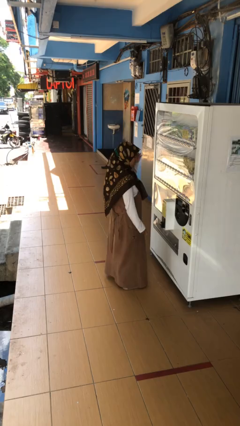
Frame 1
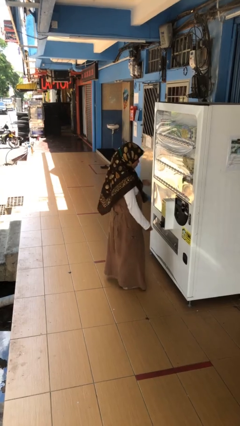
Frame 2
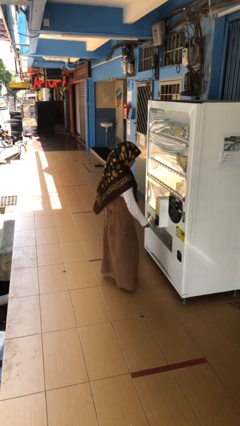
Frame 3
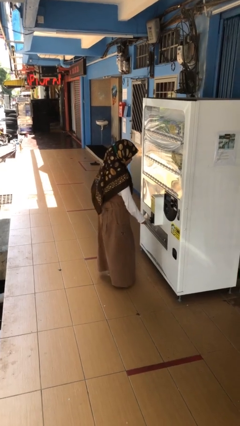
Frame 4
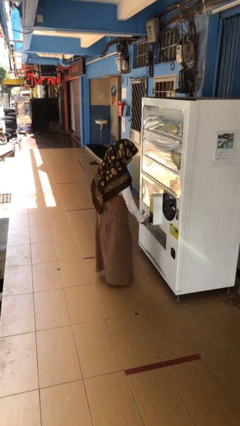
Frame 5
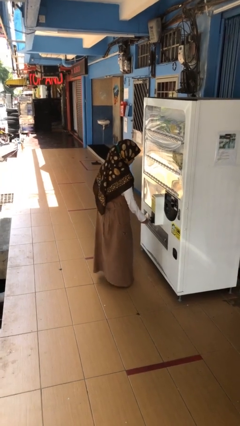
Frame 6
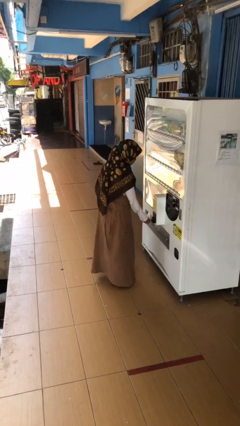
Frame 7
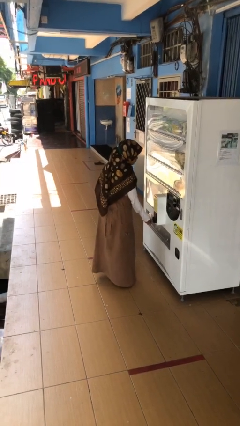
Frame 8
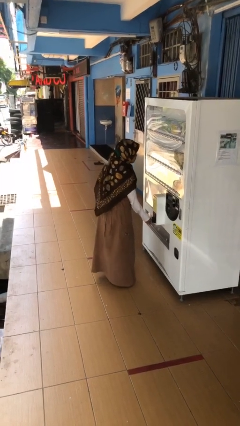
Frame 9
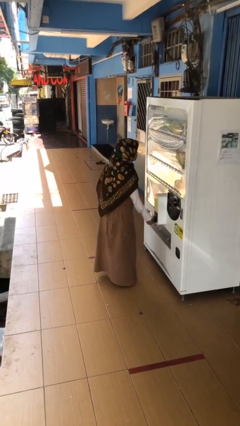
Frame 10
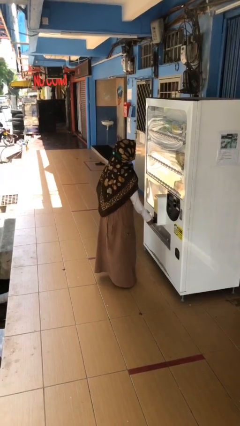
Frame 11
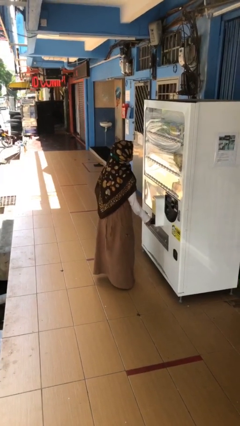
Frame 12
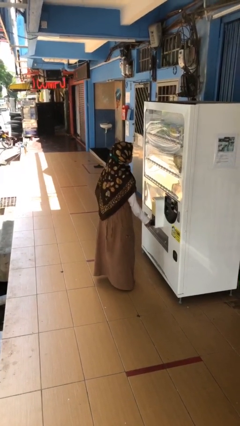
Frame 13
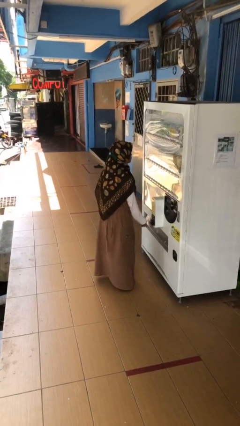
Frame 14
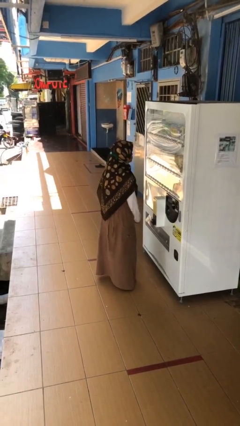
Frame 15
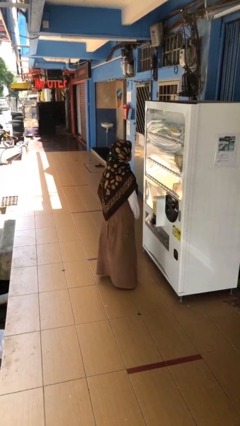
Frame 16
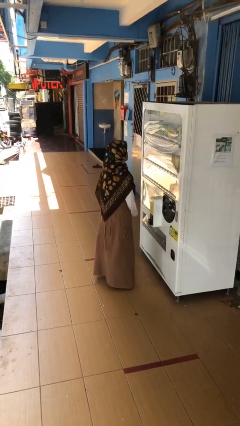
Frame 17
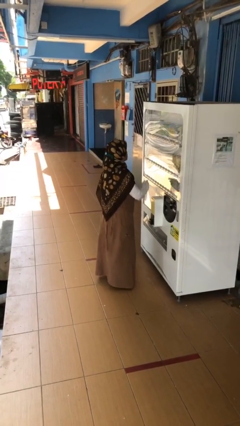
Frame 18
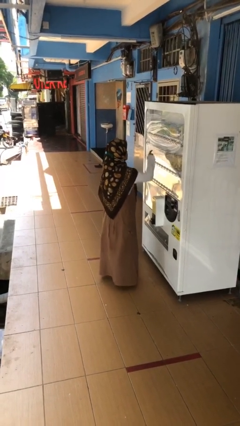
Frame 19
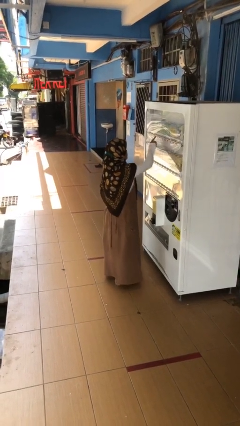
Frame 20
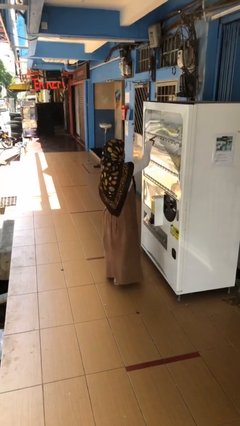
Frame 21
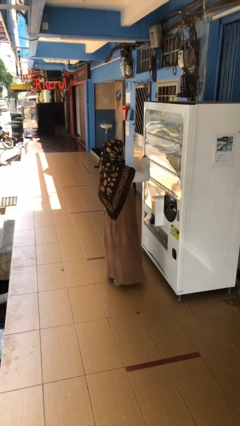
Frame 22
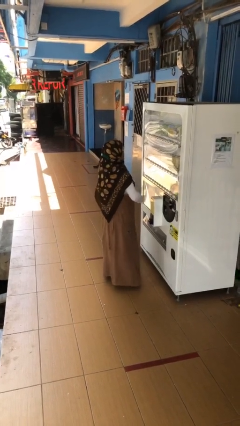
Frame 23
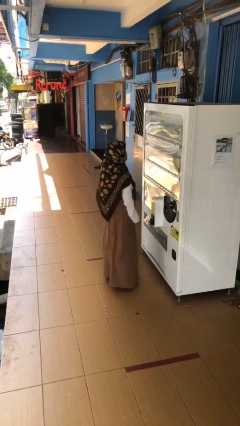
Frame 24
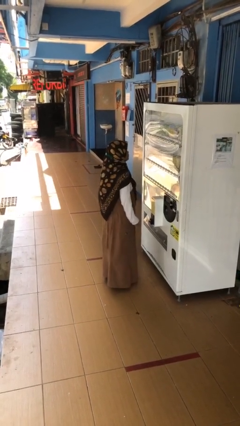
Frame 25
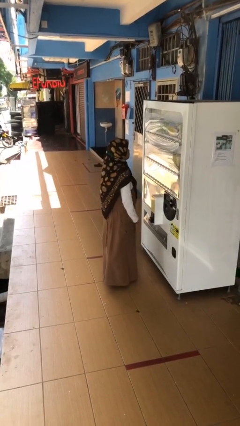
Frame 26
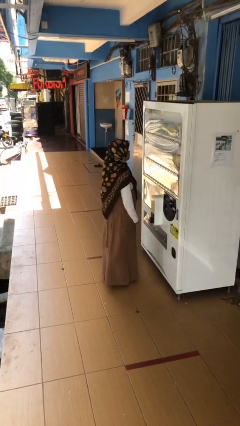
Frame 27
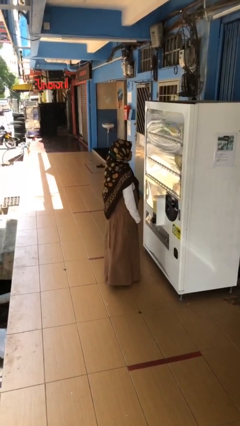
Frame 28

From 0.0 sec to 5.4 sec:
person purchases from machine

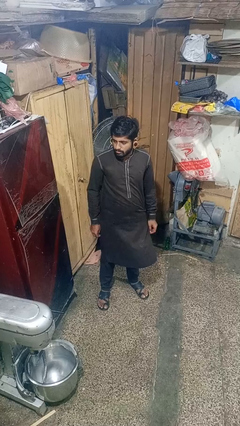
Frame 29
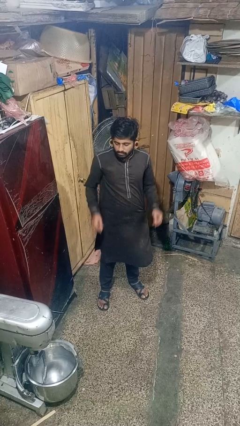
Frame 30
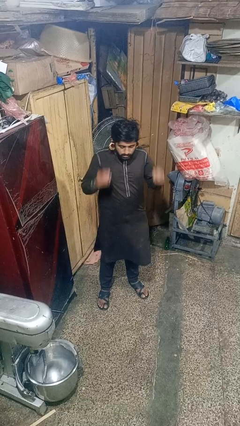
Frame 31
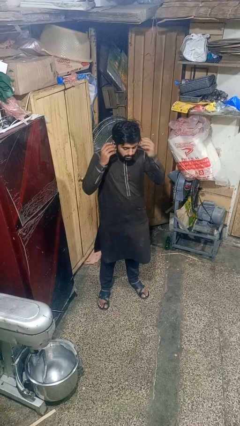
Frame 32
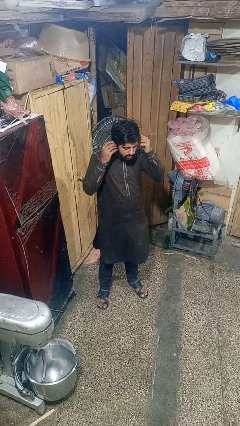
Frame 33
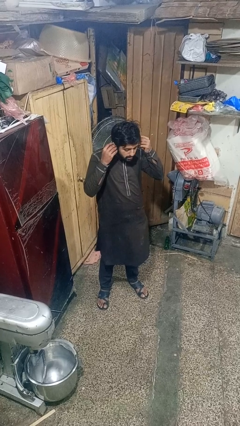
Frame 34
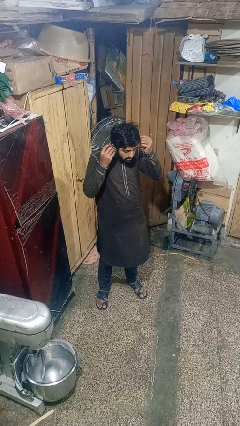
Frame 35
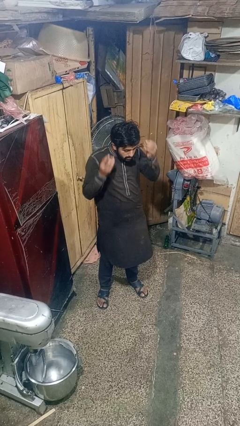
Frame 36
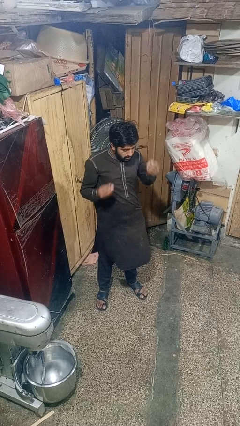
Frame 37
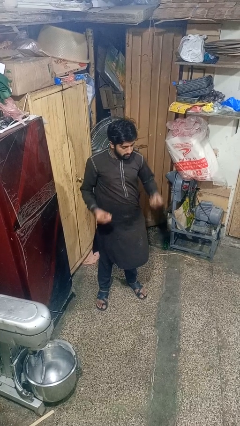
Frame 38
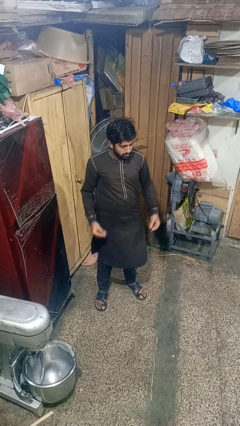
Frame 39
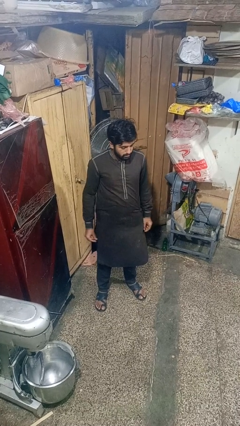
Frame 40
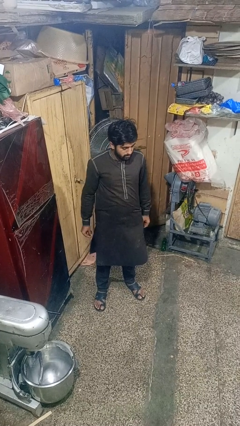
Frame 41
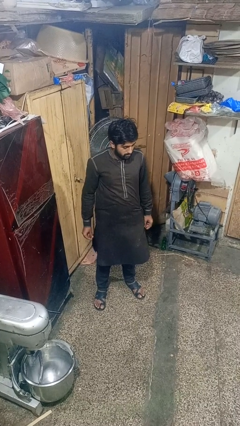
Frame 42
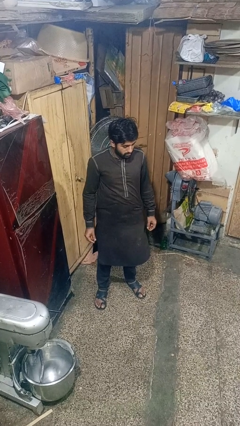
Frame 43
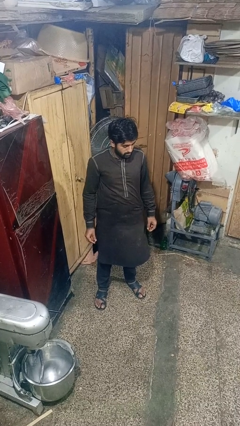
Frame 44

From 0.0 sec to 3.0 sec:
person takes off earrings

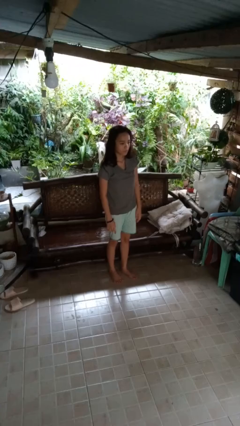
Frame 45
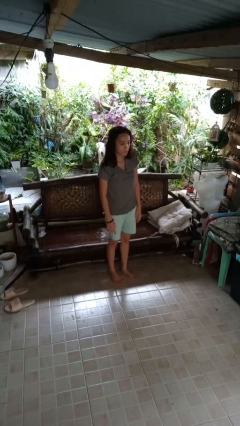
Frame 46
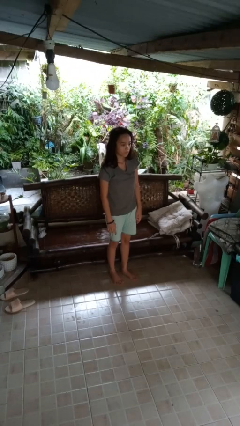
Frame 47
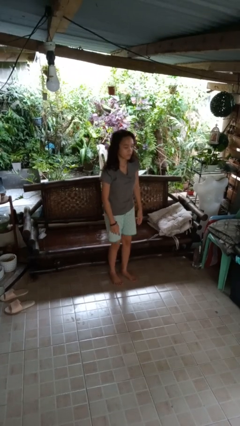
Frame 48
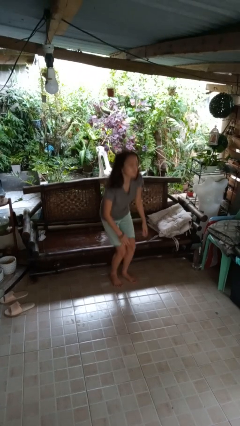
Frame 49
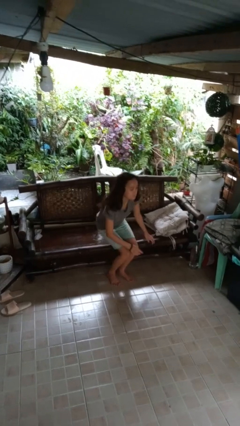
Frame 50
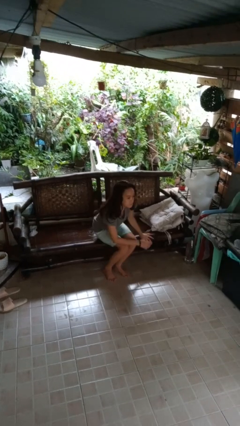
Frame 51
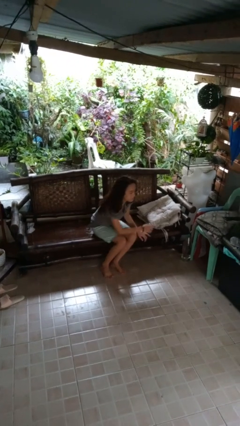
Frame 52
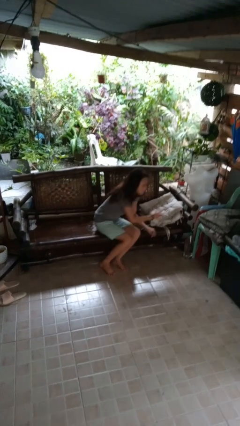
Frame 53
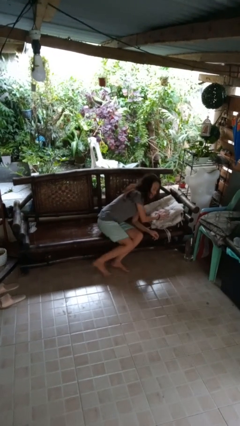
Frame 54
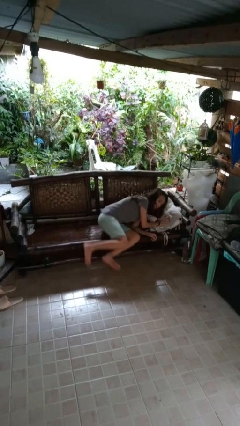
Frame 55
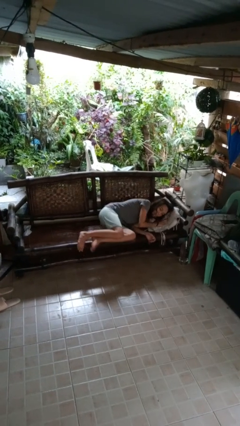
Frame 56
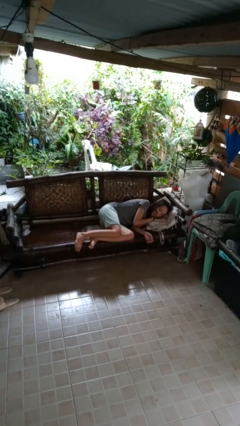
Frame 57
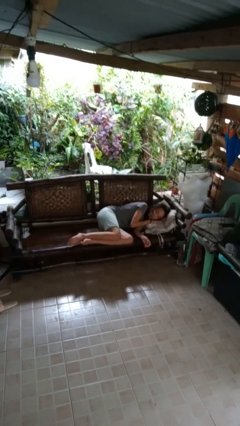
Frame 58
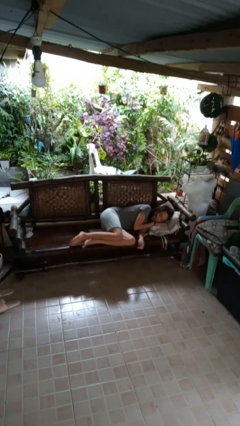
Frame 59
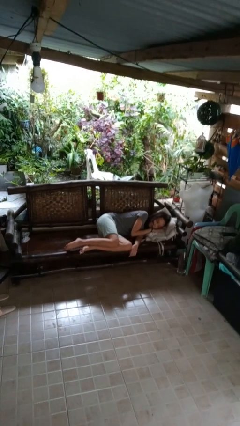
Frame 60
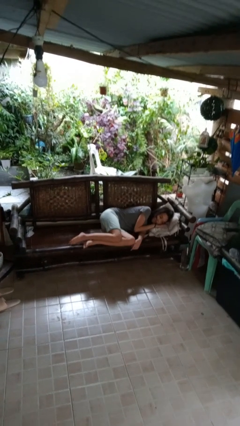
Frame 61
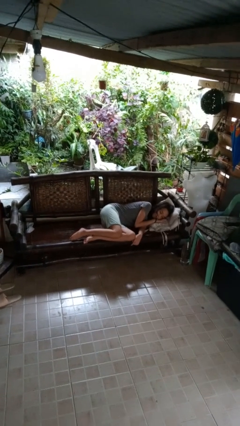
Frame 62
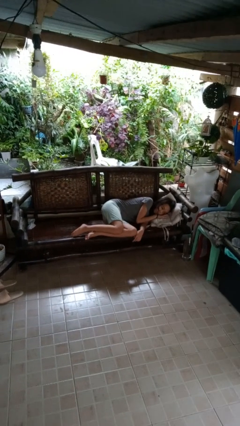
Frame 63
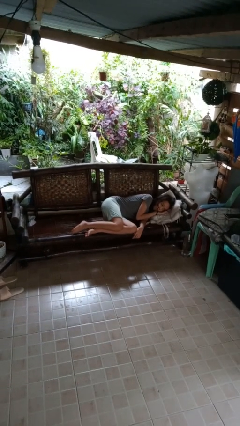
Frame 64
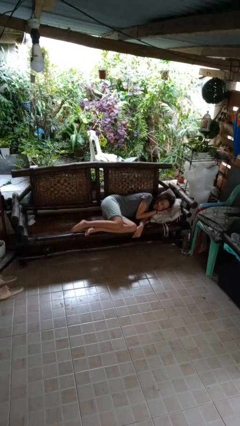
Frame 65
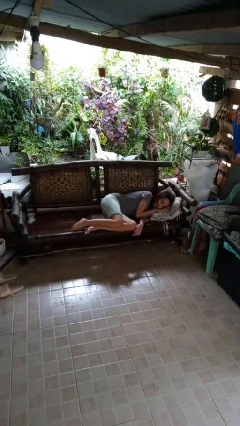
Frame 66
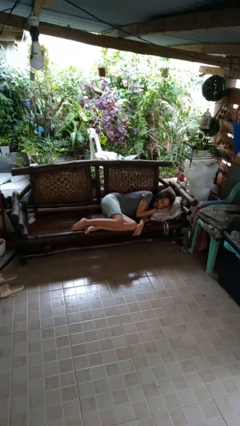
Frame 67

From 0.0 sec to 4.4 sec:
person lies down on couch

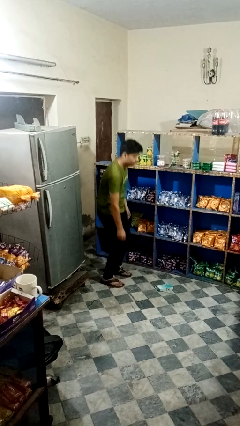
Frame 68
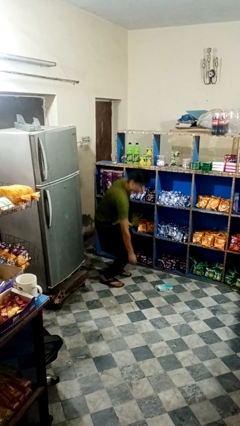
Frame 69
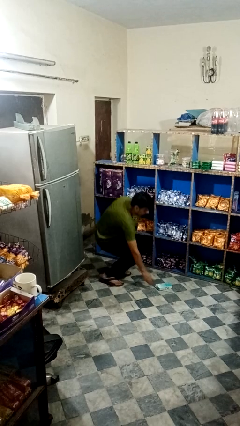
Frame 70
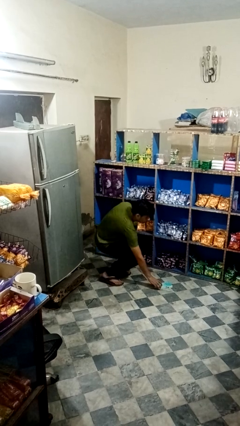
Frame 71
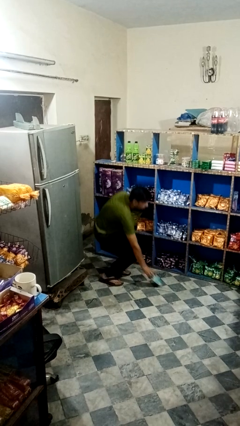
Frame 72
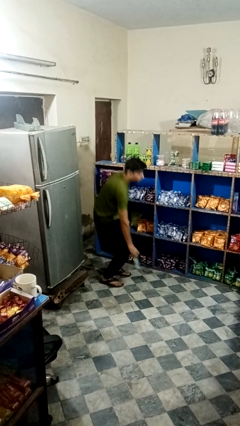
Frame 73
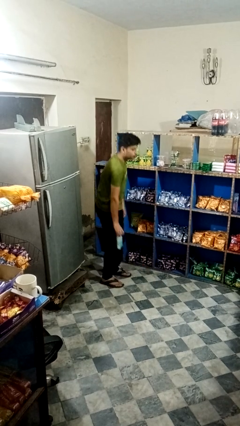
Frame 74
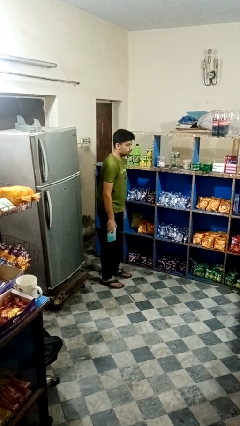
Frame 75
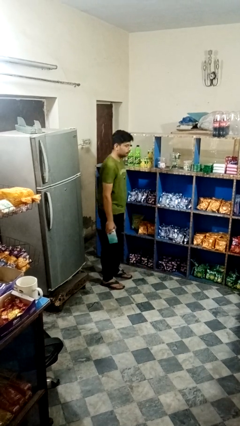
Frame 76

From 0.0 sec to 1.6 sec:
person picks up object from floor

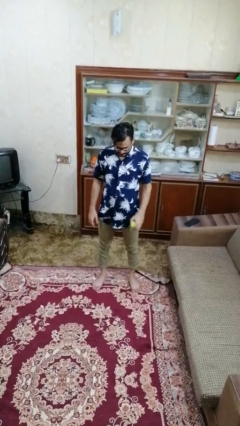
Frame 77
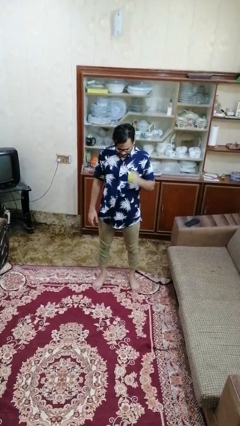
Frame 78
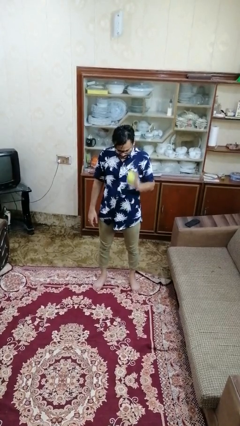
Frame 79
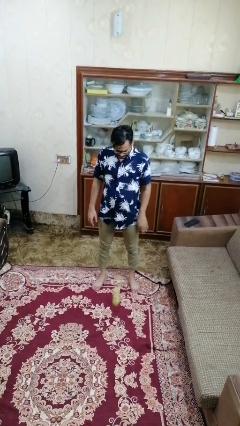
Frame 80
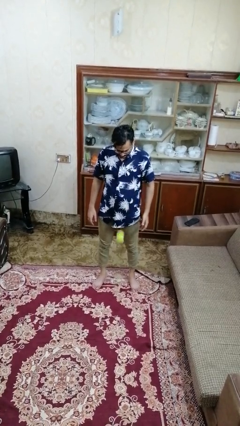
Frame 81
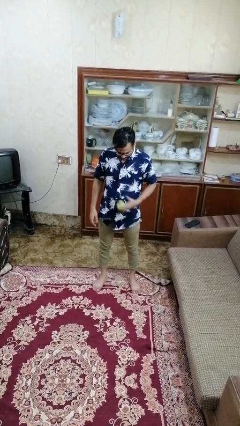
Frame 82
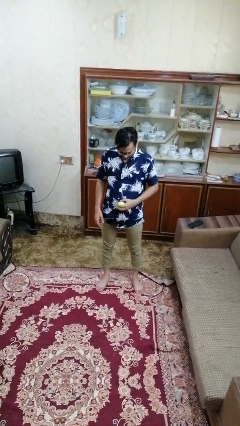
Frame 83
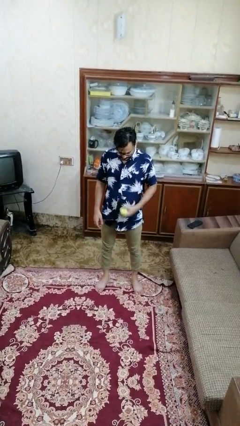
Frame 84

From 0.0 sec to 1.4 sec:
person bounces ball on floor

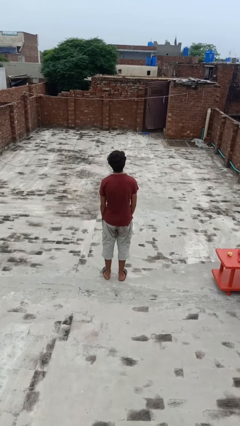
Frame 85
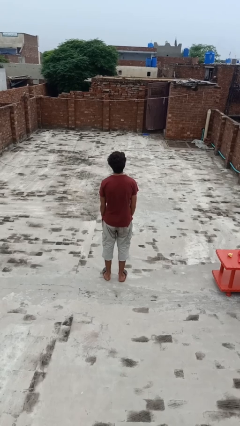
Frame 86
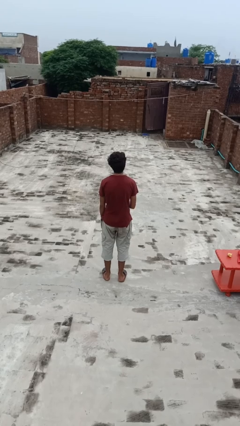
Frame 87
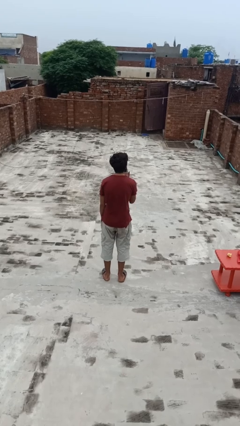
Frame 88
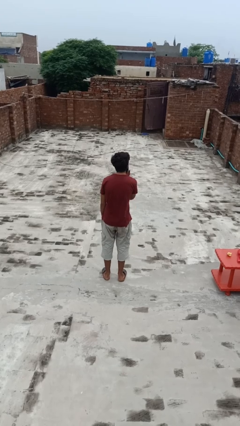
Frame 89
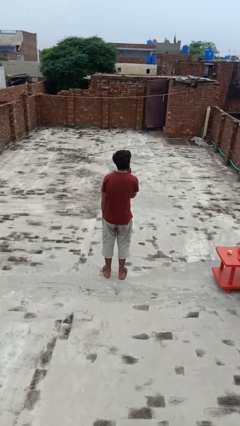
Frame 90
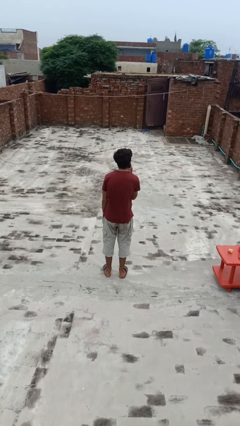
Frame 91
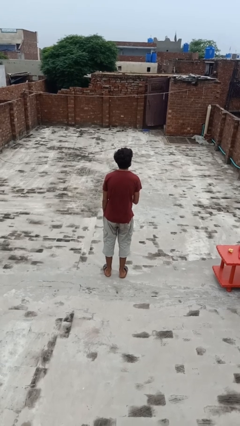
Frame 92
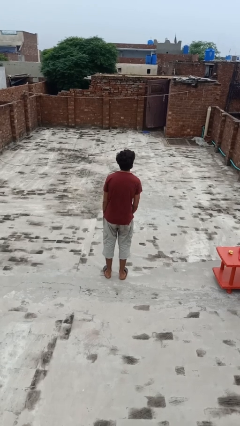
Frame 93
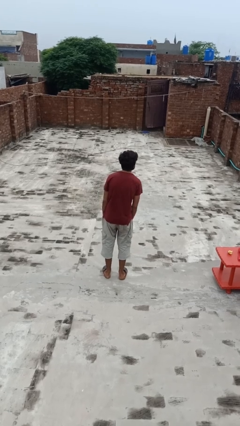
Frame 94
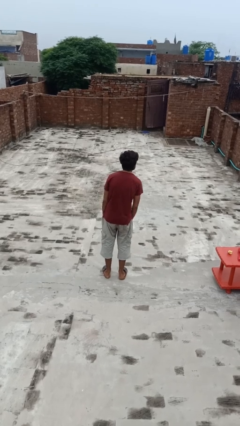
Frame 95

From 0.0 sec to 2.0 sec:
person gestures blow kiss
